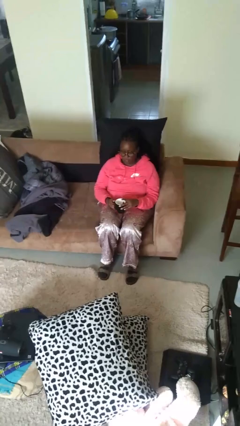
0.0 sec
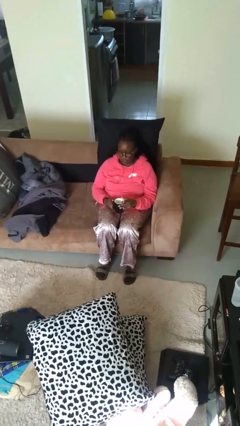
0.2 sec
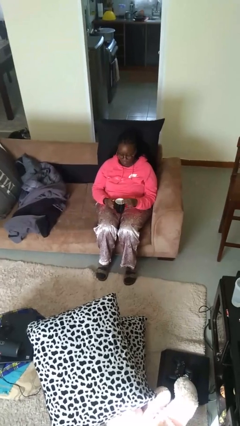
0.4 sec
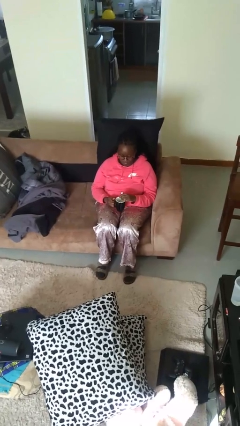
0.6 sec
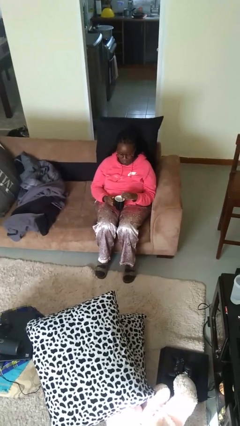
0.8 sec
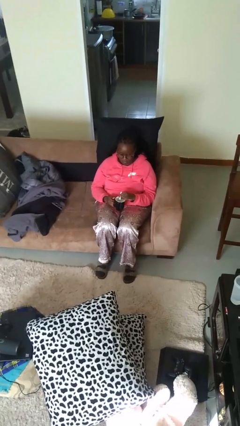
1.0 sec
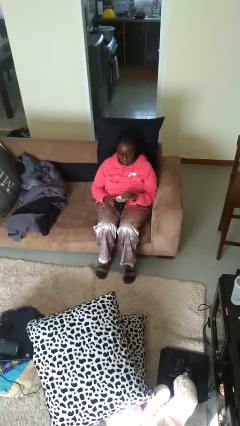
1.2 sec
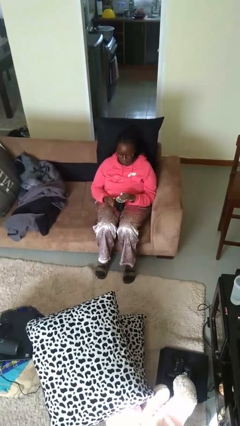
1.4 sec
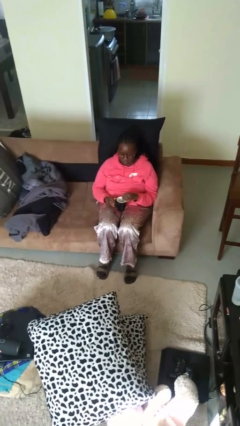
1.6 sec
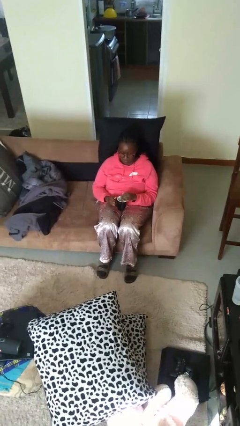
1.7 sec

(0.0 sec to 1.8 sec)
person stirs mug

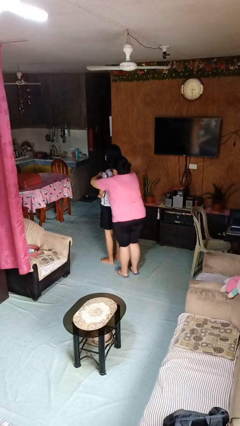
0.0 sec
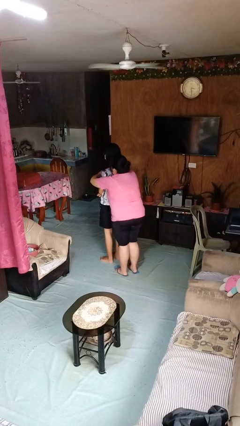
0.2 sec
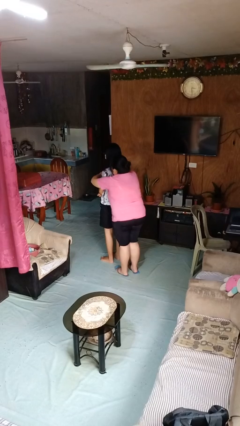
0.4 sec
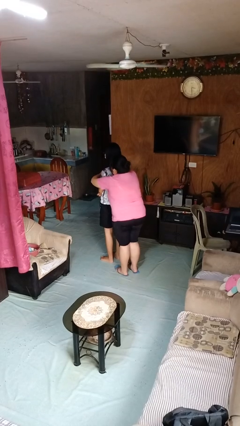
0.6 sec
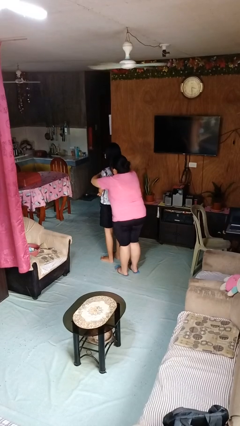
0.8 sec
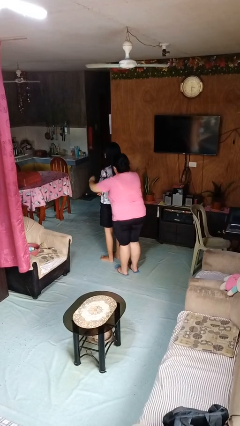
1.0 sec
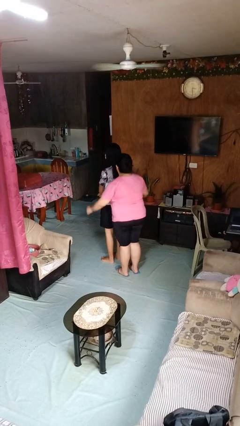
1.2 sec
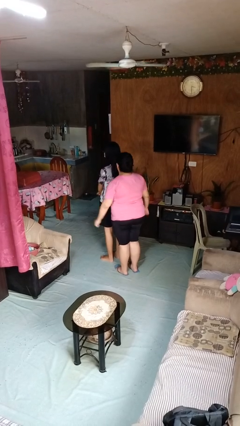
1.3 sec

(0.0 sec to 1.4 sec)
person hugs person from behind

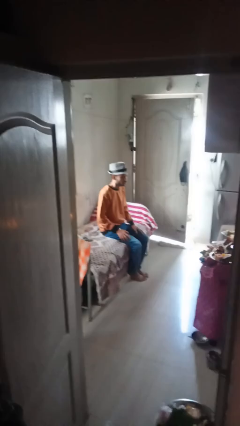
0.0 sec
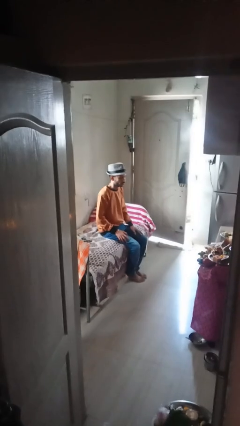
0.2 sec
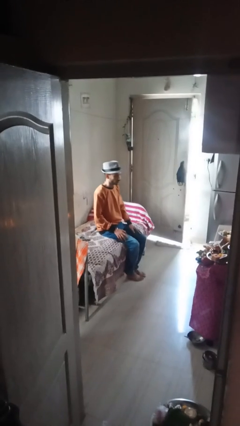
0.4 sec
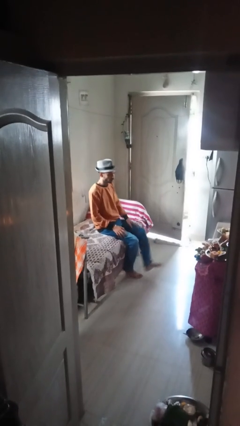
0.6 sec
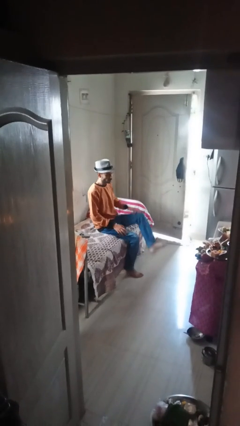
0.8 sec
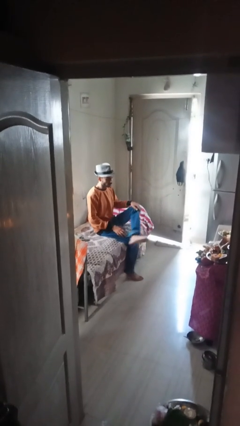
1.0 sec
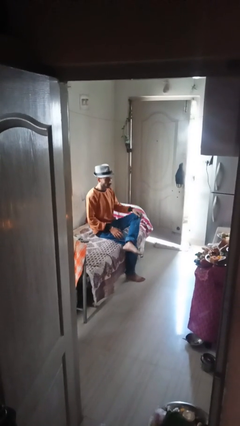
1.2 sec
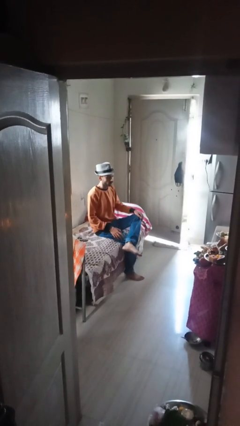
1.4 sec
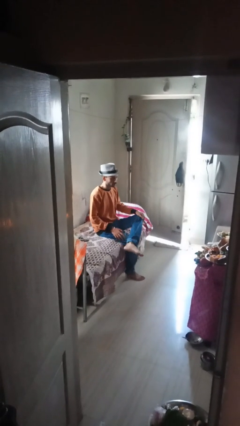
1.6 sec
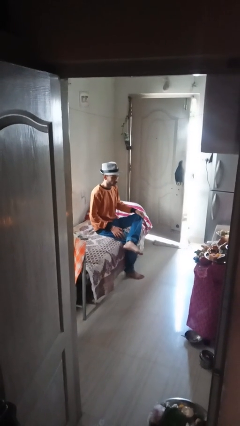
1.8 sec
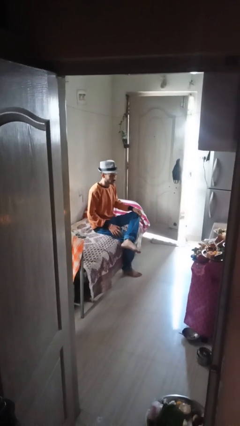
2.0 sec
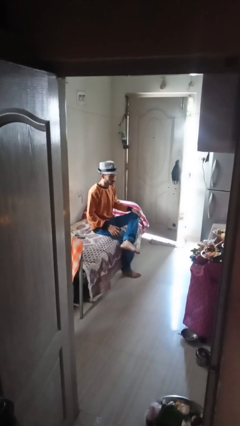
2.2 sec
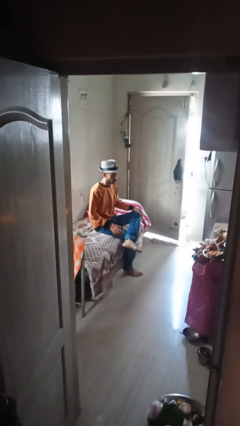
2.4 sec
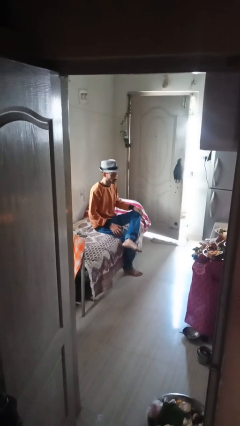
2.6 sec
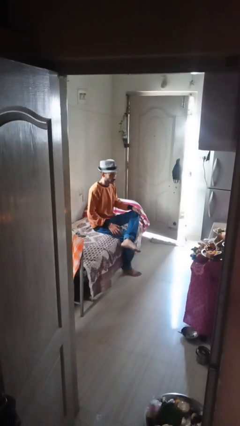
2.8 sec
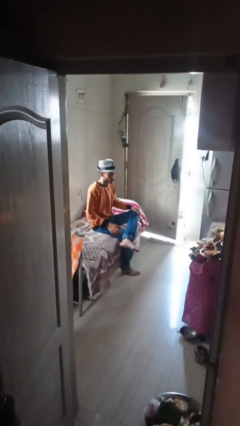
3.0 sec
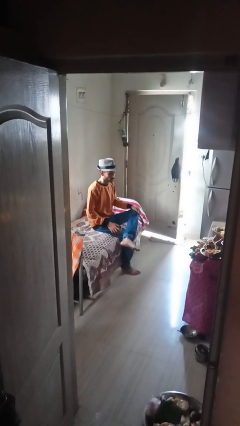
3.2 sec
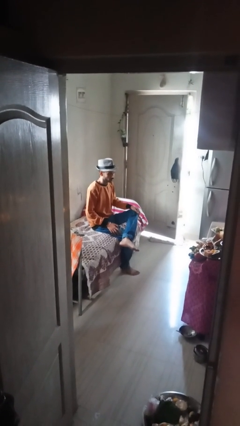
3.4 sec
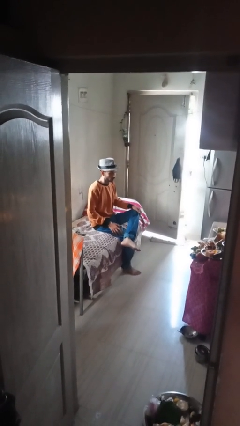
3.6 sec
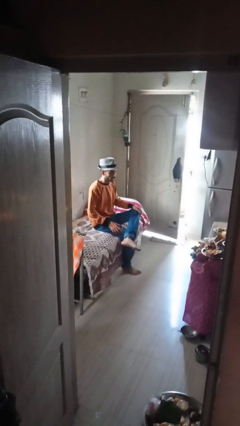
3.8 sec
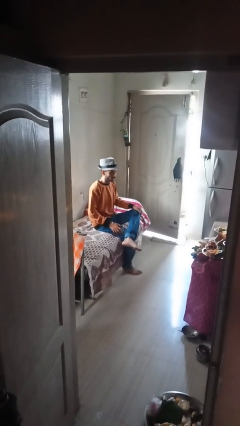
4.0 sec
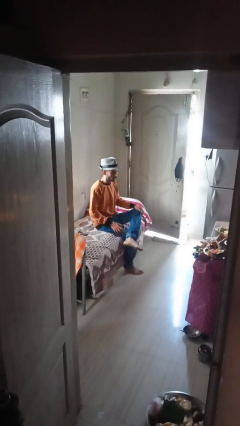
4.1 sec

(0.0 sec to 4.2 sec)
person crosses legs

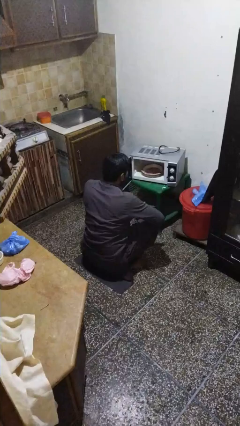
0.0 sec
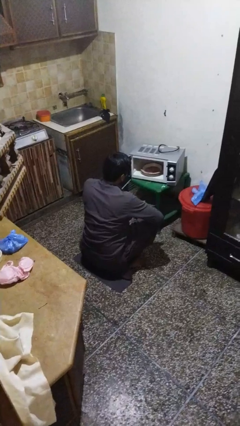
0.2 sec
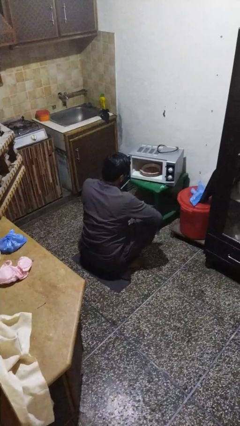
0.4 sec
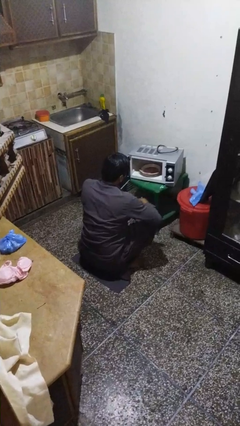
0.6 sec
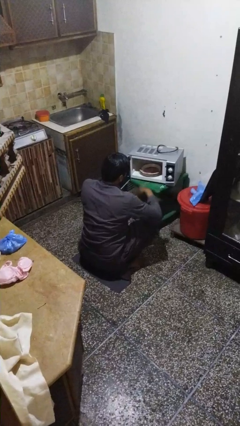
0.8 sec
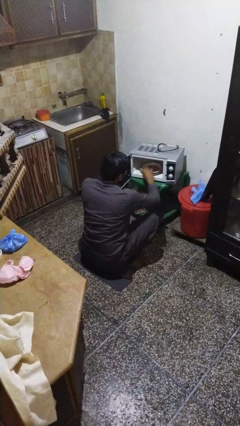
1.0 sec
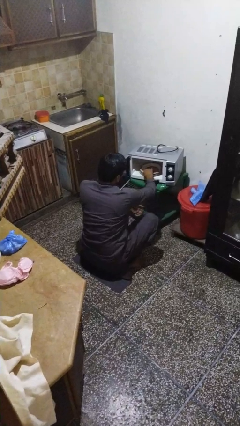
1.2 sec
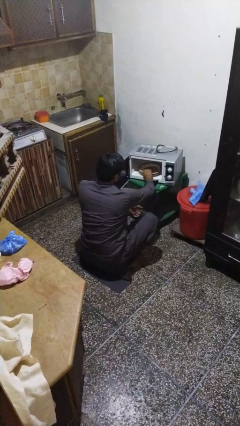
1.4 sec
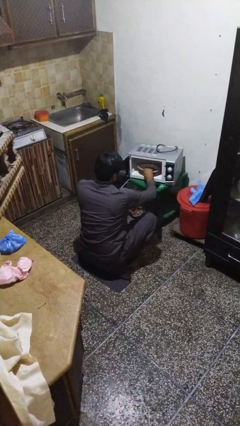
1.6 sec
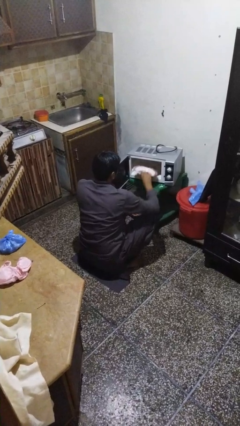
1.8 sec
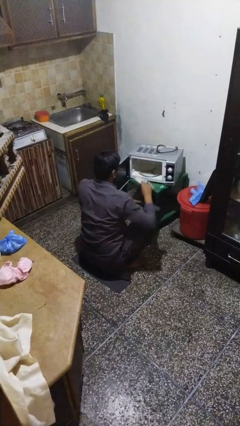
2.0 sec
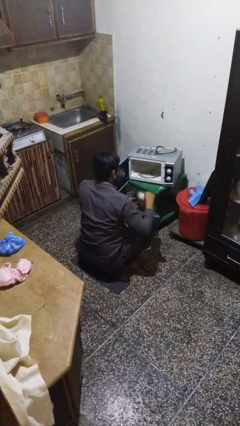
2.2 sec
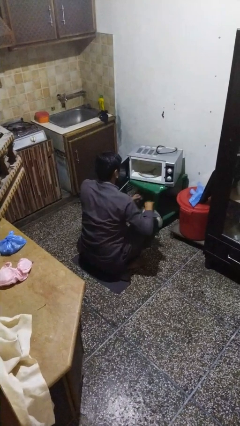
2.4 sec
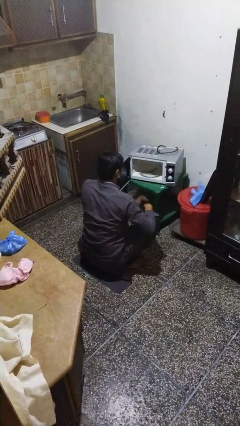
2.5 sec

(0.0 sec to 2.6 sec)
person takes object from microwave

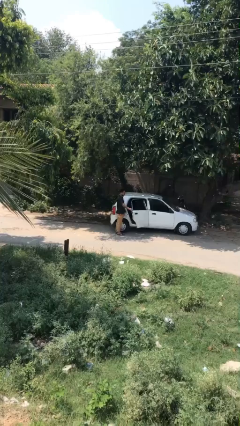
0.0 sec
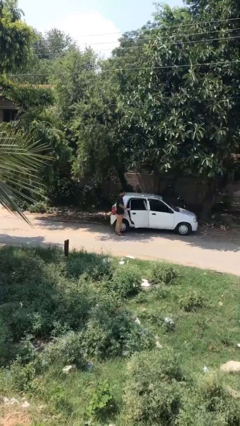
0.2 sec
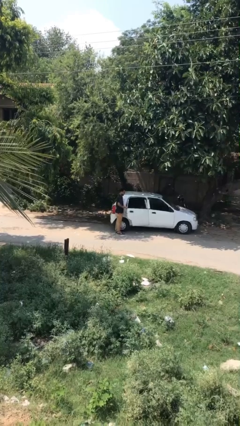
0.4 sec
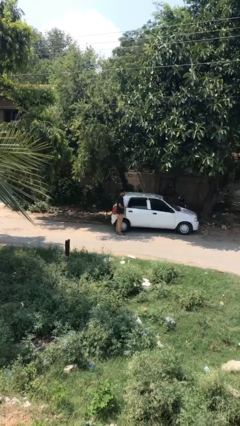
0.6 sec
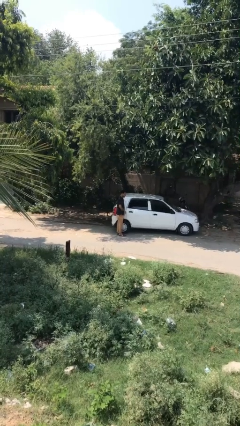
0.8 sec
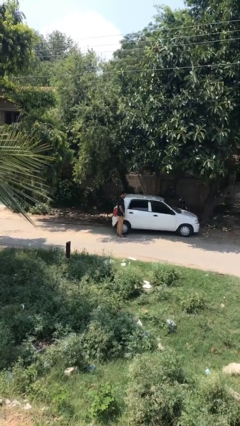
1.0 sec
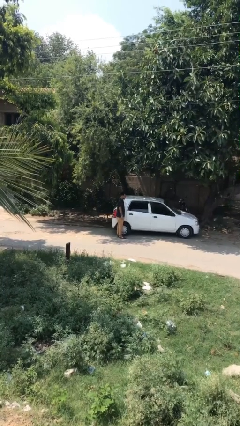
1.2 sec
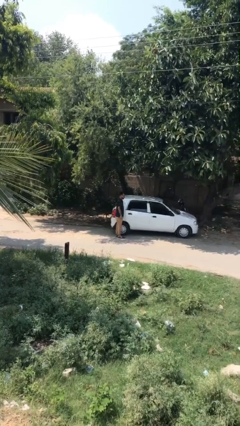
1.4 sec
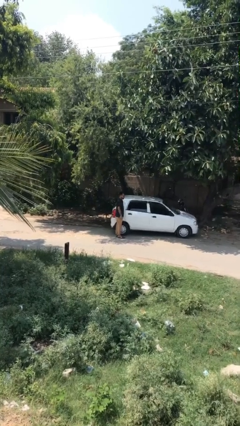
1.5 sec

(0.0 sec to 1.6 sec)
person closes car door

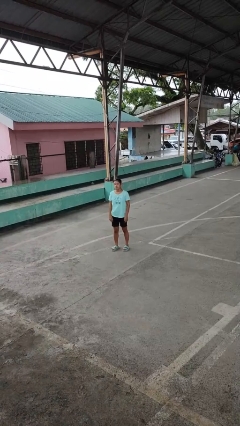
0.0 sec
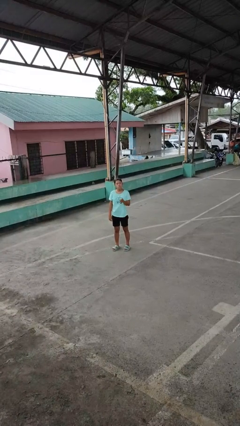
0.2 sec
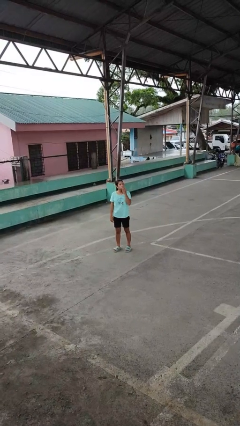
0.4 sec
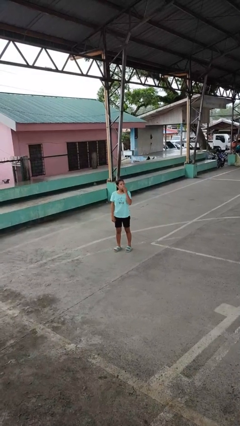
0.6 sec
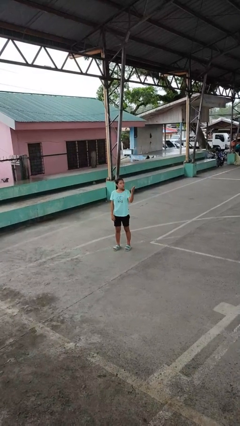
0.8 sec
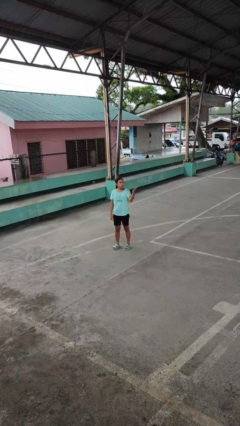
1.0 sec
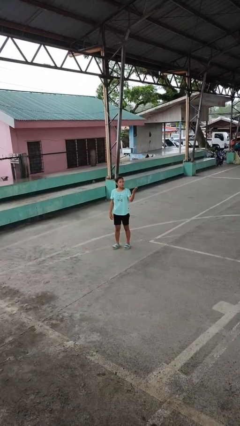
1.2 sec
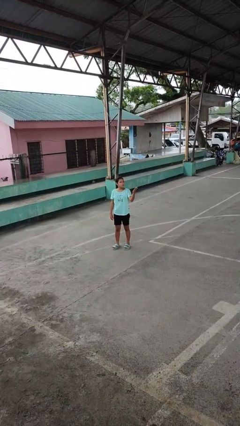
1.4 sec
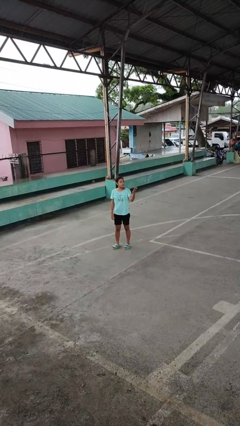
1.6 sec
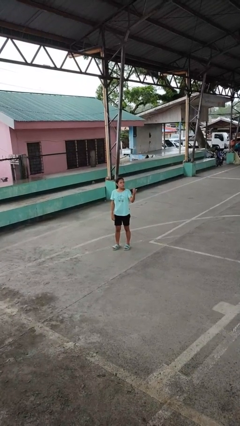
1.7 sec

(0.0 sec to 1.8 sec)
person gestures blow kiss

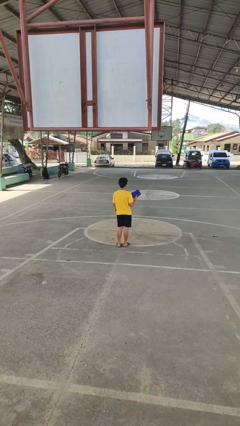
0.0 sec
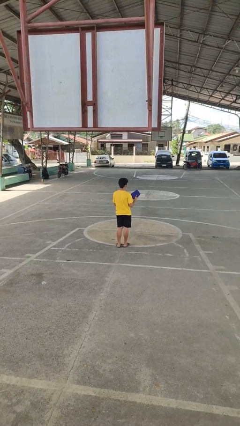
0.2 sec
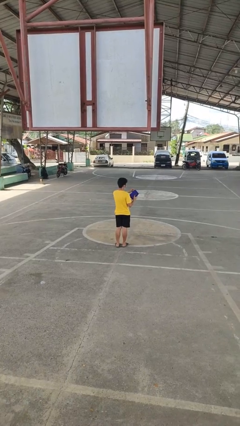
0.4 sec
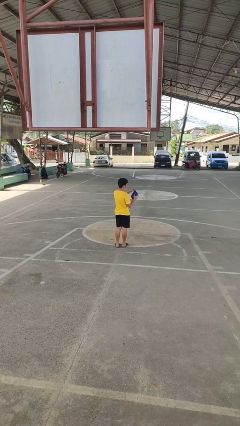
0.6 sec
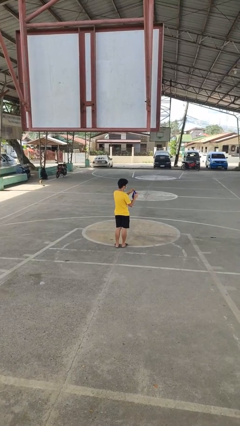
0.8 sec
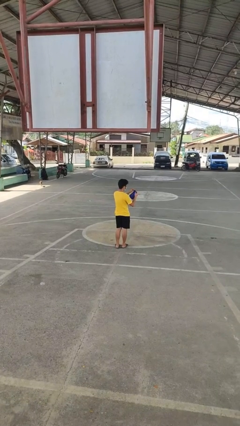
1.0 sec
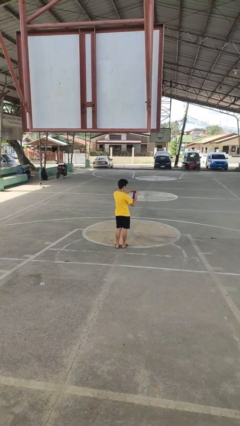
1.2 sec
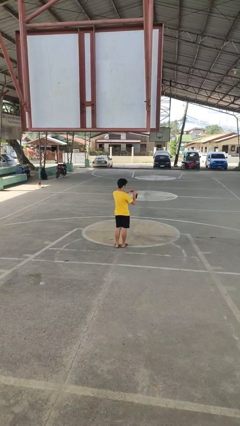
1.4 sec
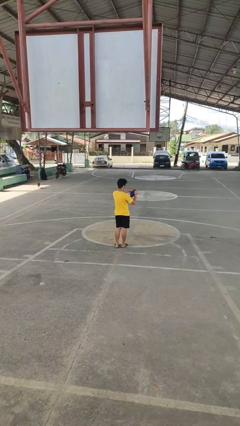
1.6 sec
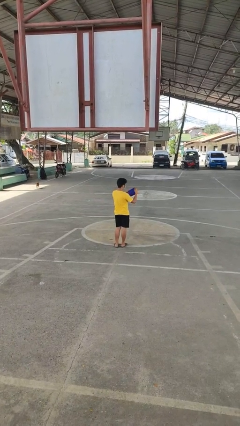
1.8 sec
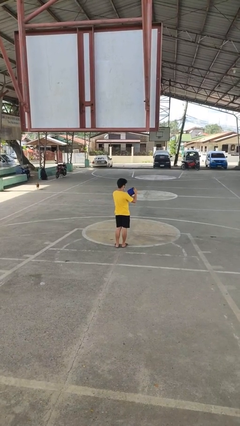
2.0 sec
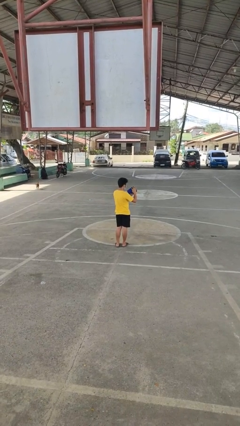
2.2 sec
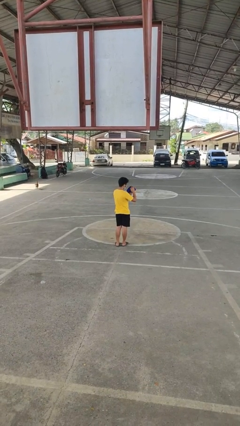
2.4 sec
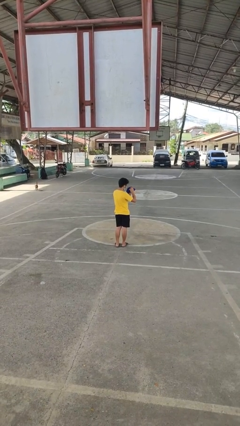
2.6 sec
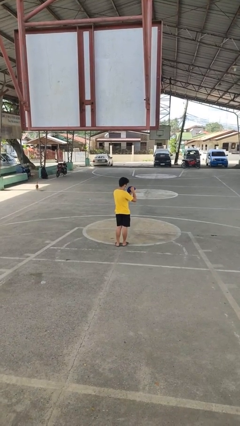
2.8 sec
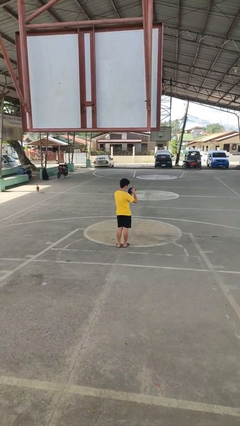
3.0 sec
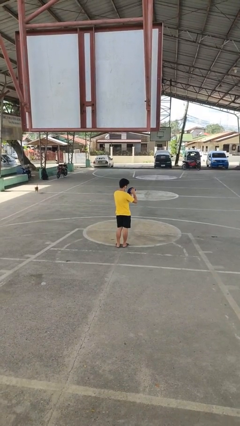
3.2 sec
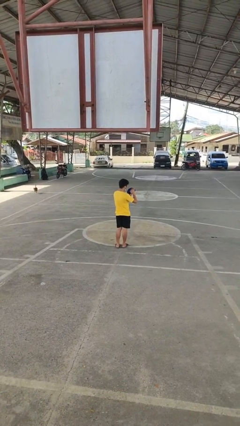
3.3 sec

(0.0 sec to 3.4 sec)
person searches in purse

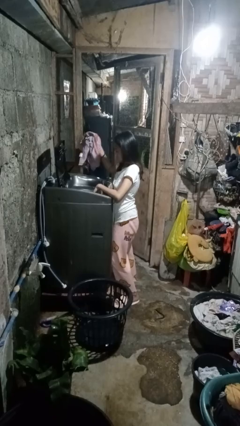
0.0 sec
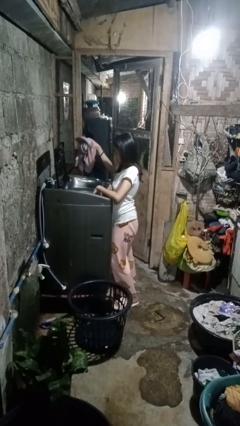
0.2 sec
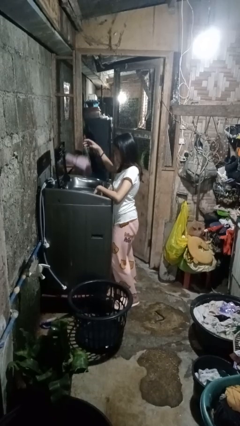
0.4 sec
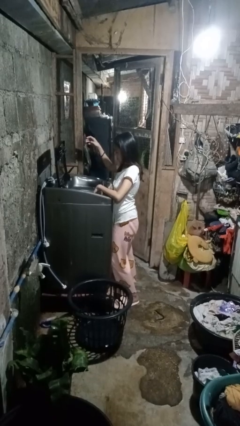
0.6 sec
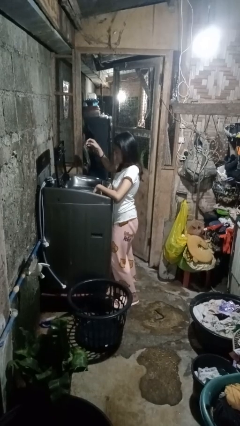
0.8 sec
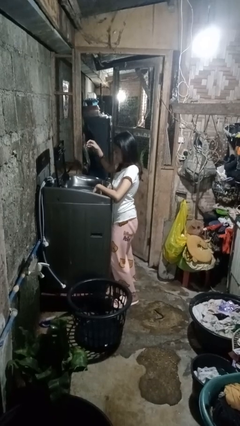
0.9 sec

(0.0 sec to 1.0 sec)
person loads dryer
